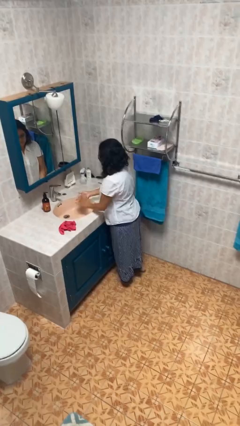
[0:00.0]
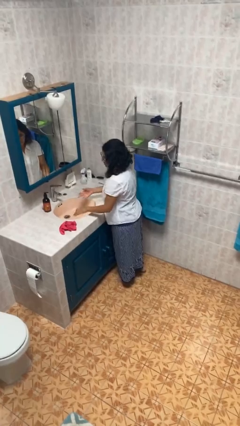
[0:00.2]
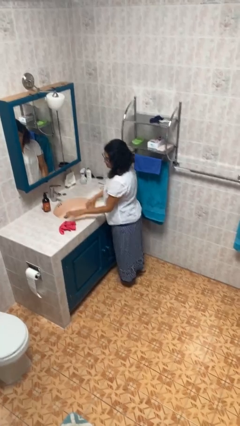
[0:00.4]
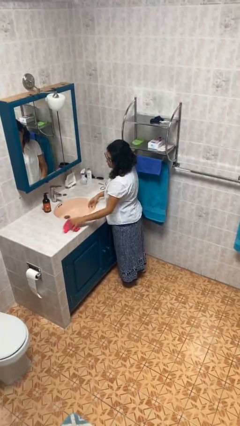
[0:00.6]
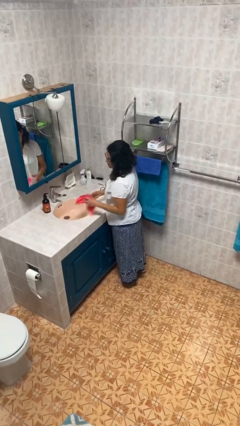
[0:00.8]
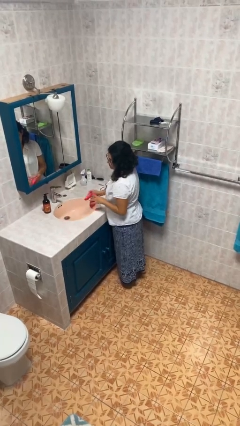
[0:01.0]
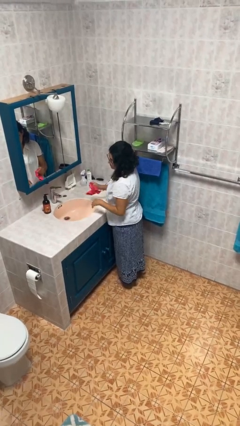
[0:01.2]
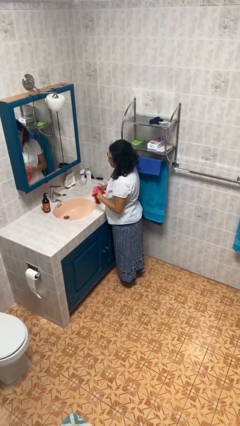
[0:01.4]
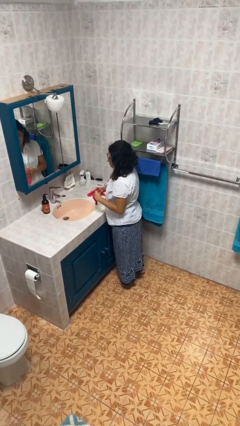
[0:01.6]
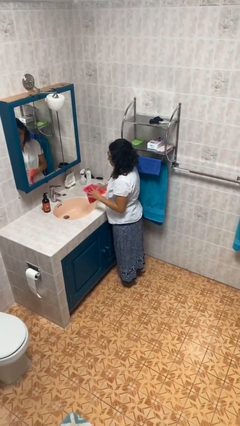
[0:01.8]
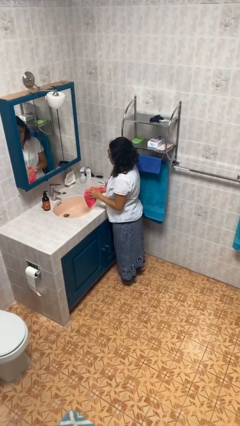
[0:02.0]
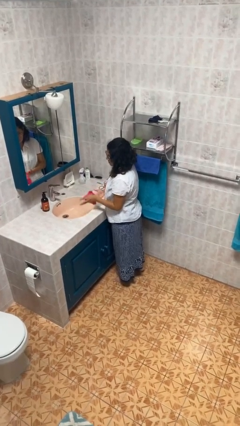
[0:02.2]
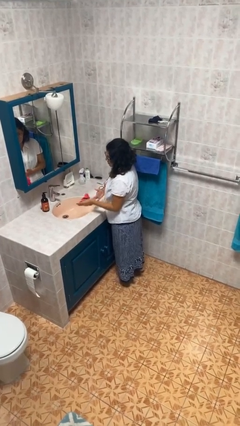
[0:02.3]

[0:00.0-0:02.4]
person dries hands with towel

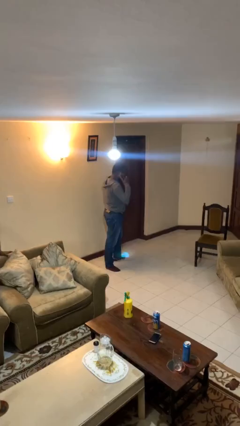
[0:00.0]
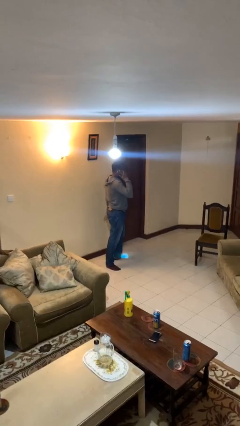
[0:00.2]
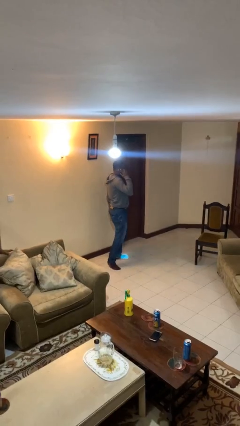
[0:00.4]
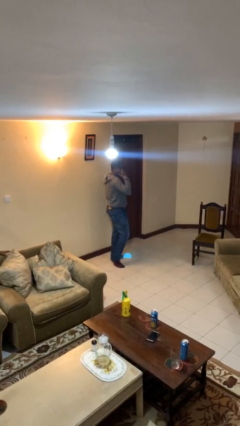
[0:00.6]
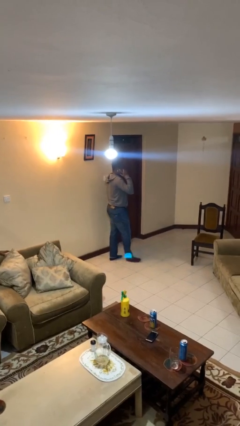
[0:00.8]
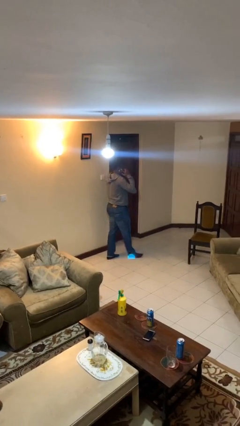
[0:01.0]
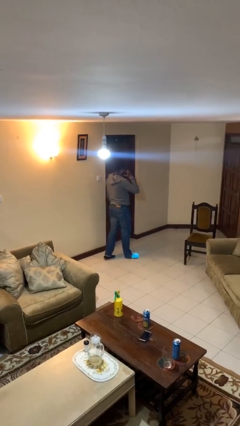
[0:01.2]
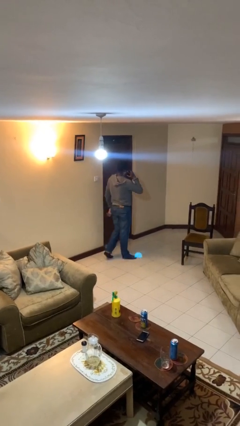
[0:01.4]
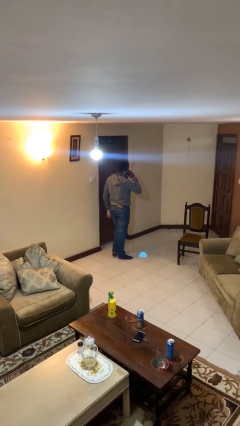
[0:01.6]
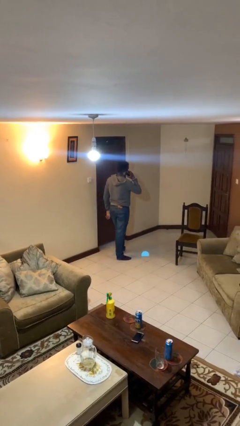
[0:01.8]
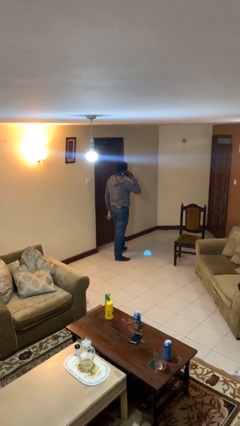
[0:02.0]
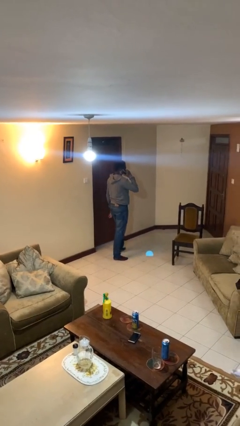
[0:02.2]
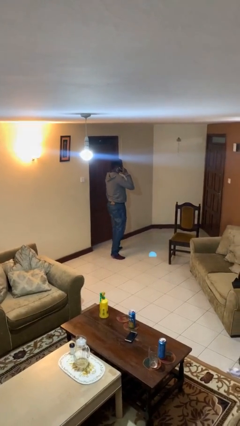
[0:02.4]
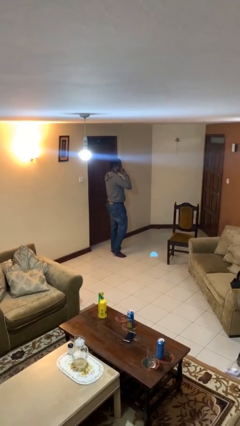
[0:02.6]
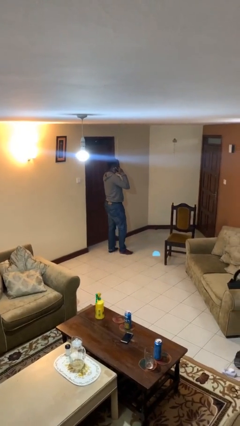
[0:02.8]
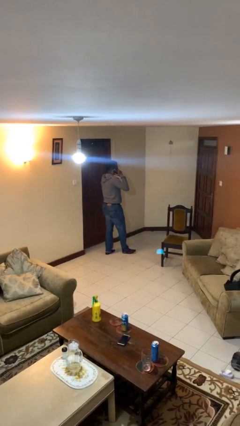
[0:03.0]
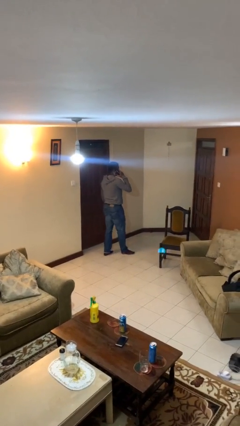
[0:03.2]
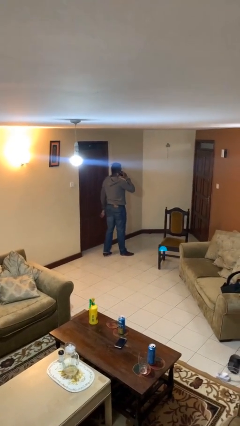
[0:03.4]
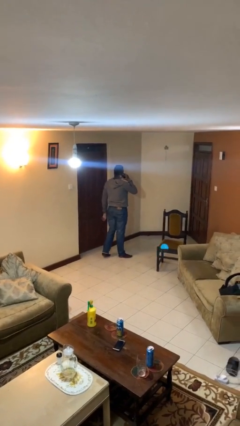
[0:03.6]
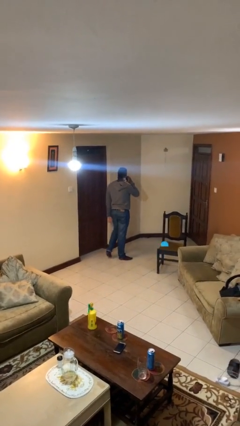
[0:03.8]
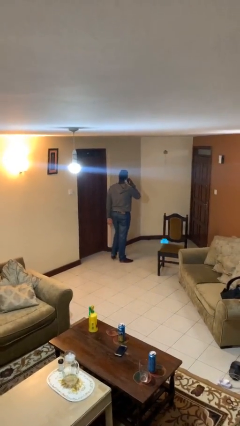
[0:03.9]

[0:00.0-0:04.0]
person talks on phone

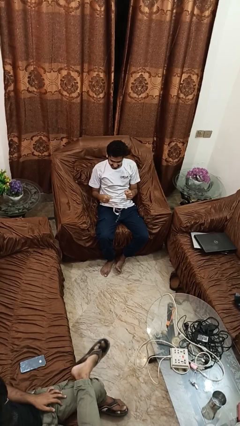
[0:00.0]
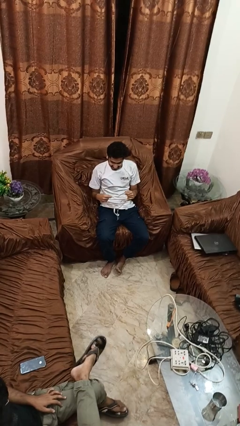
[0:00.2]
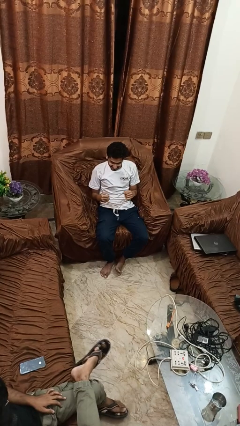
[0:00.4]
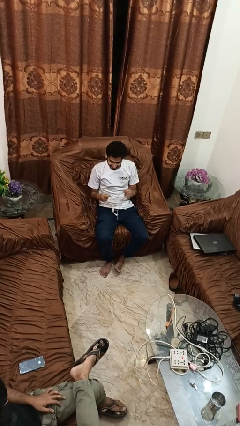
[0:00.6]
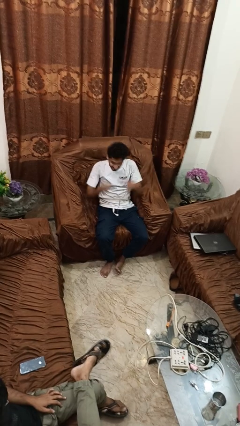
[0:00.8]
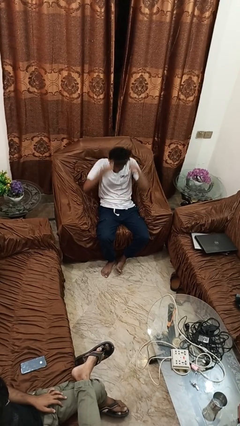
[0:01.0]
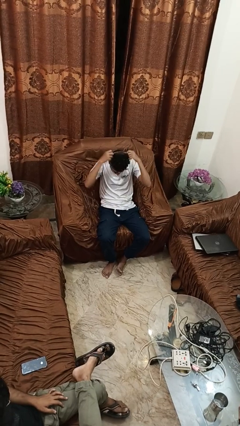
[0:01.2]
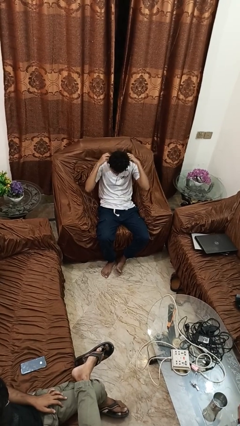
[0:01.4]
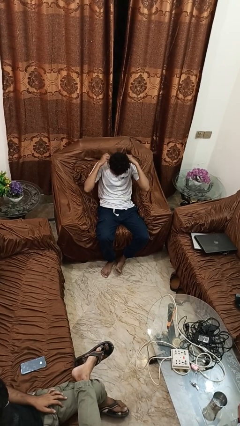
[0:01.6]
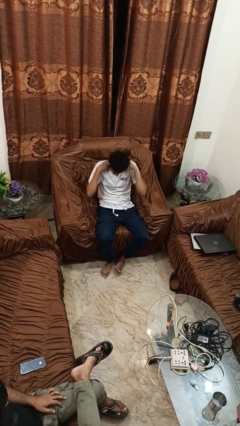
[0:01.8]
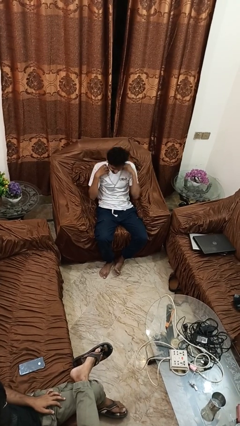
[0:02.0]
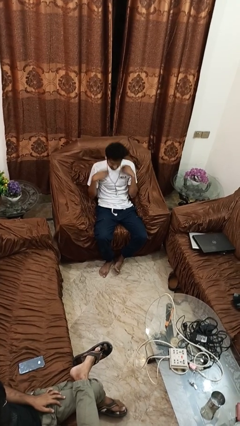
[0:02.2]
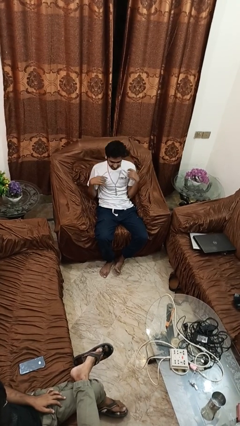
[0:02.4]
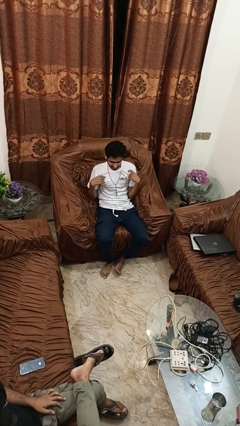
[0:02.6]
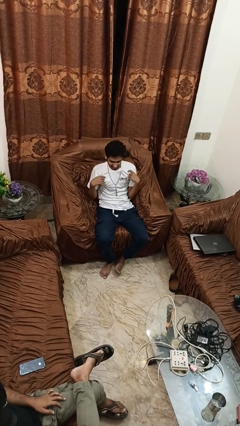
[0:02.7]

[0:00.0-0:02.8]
person puts on necklace

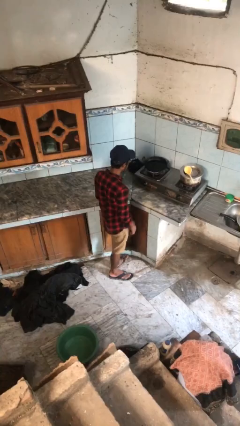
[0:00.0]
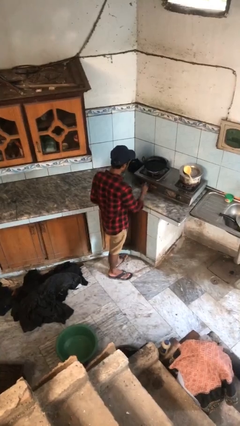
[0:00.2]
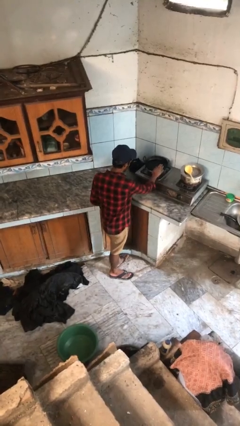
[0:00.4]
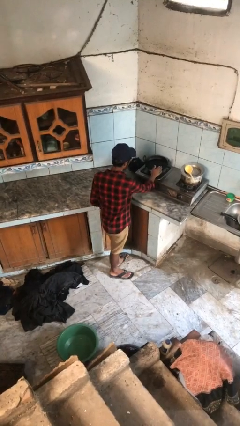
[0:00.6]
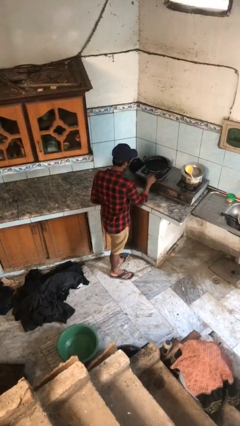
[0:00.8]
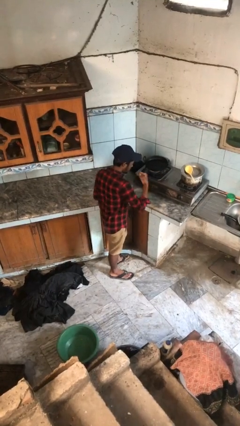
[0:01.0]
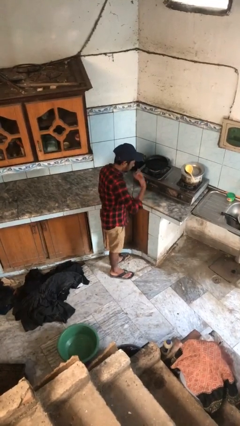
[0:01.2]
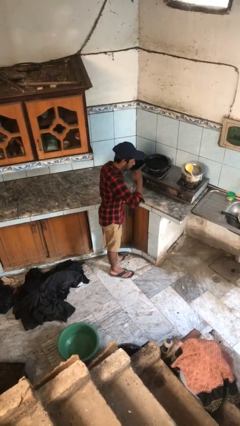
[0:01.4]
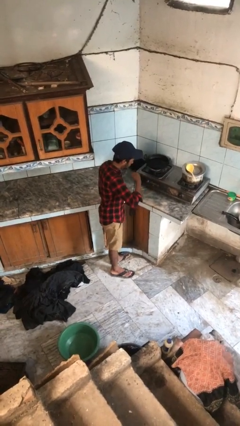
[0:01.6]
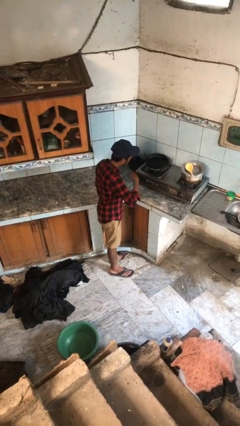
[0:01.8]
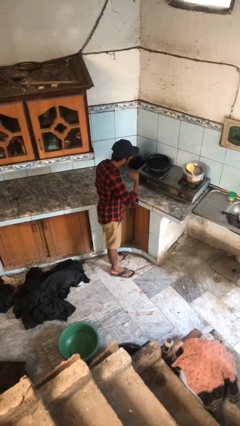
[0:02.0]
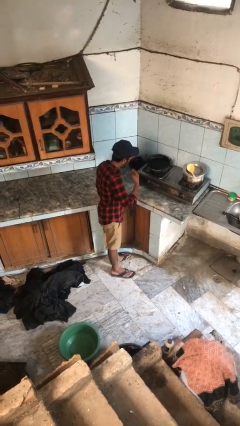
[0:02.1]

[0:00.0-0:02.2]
person burns hand

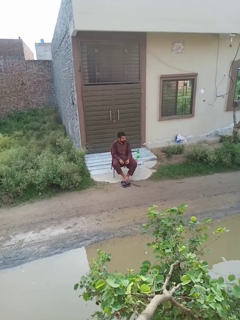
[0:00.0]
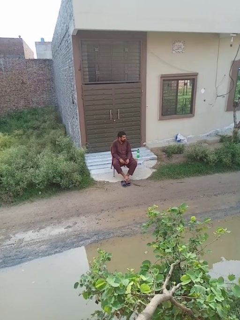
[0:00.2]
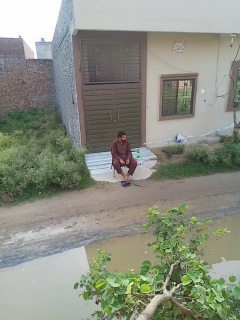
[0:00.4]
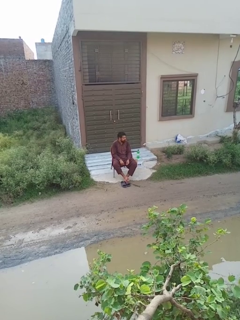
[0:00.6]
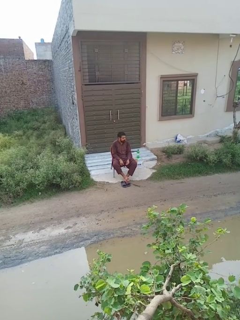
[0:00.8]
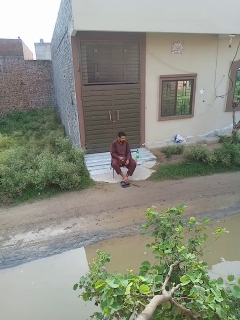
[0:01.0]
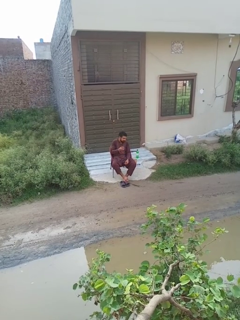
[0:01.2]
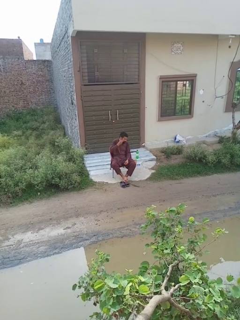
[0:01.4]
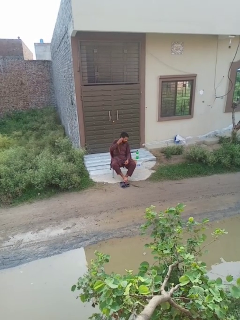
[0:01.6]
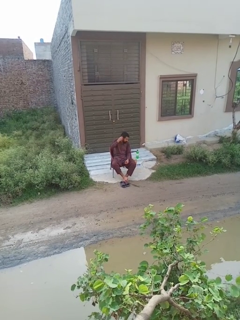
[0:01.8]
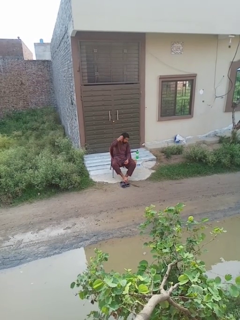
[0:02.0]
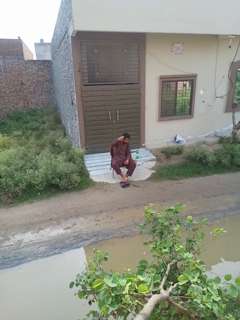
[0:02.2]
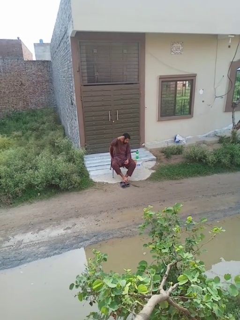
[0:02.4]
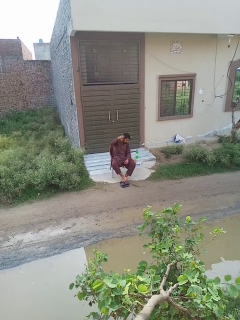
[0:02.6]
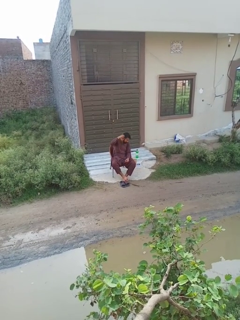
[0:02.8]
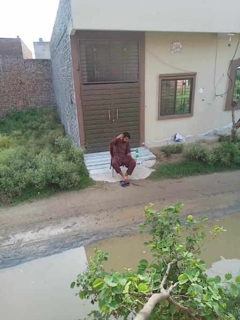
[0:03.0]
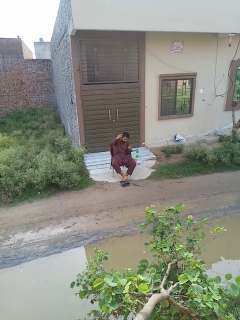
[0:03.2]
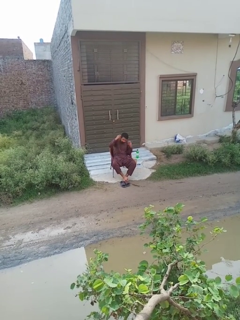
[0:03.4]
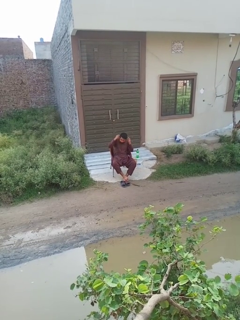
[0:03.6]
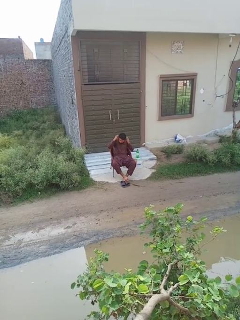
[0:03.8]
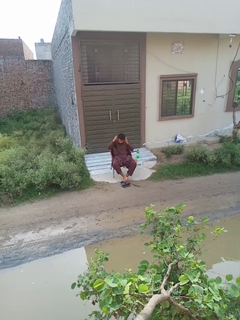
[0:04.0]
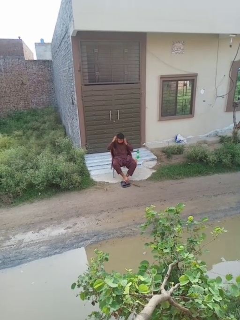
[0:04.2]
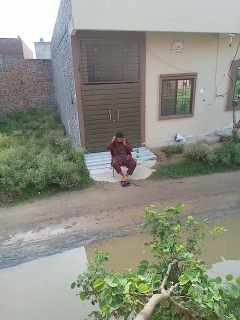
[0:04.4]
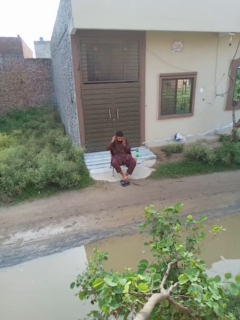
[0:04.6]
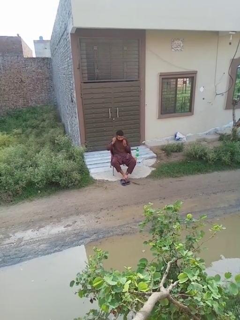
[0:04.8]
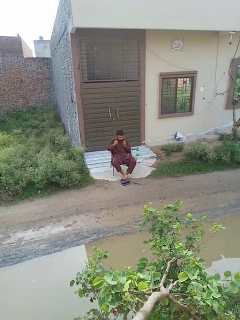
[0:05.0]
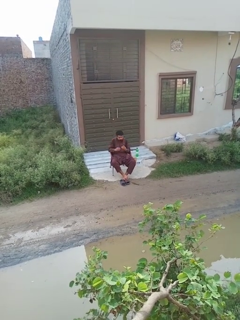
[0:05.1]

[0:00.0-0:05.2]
person puts on earrings

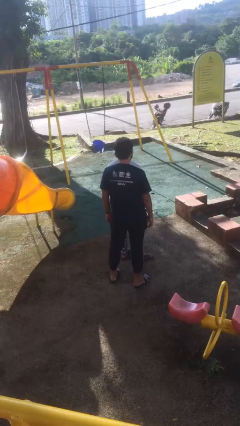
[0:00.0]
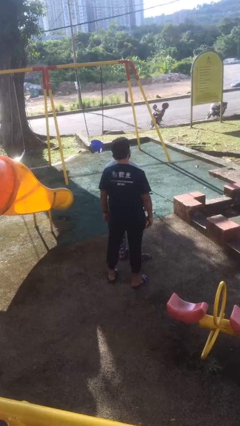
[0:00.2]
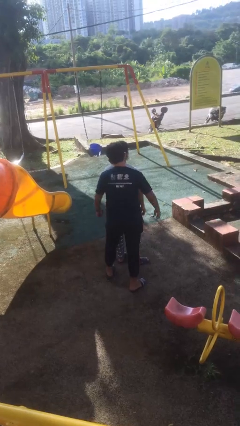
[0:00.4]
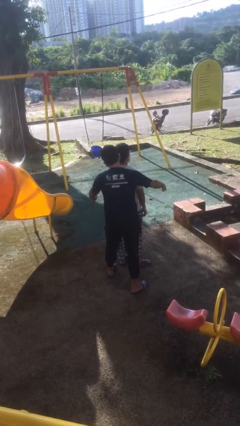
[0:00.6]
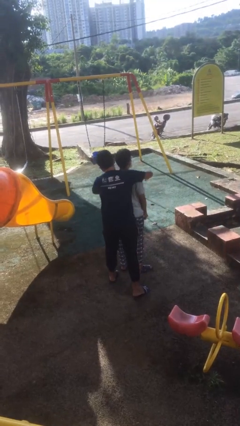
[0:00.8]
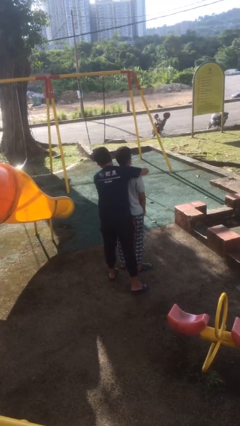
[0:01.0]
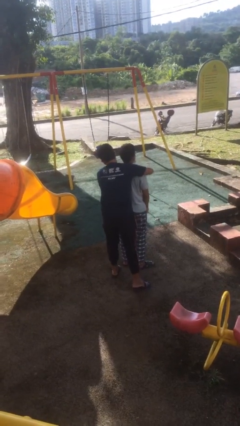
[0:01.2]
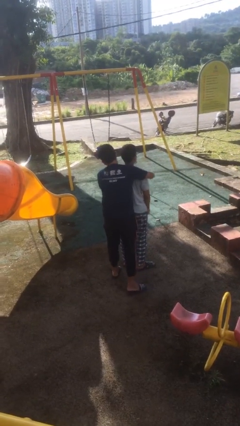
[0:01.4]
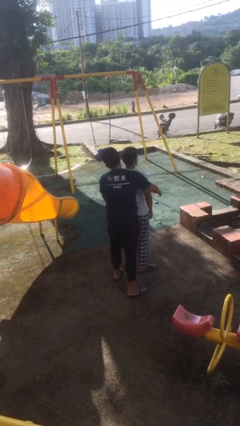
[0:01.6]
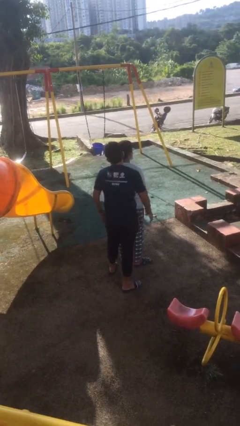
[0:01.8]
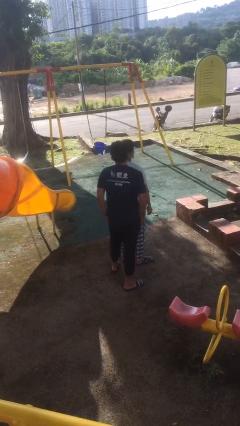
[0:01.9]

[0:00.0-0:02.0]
person hugs person from behind
